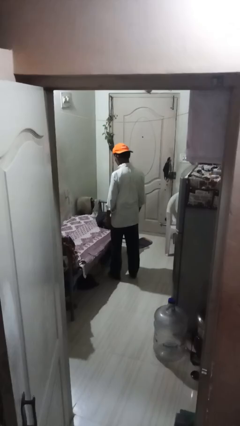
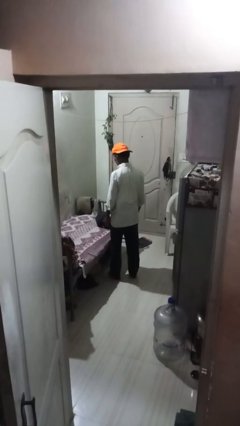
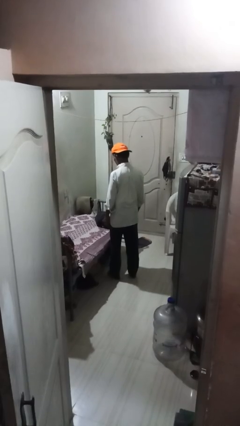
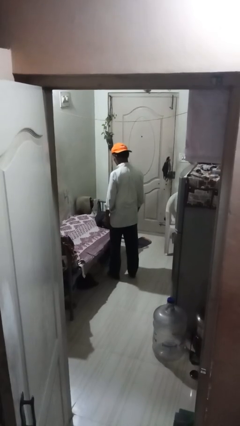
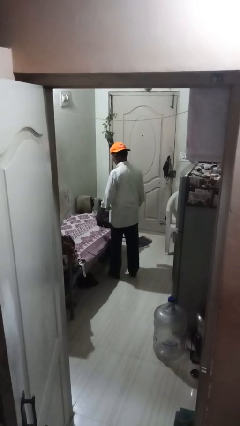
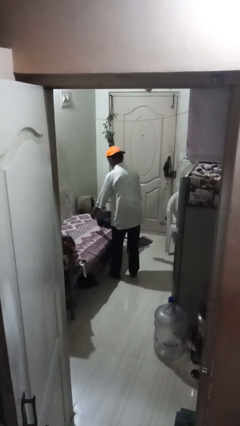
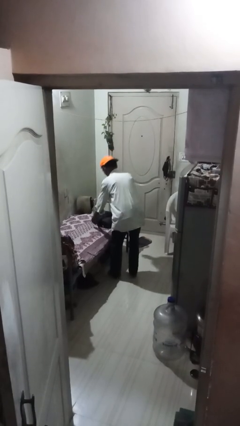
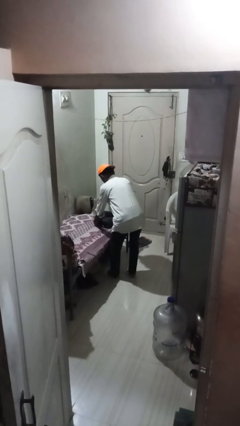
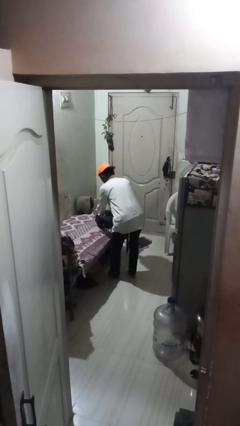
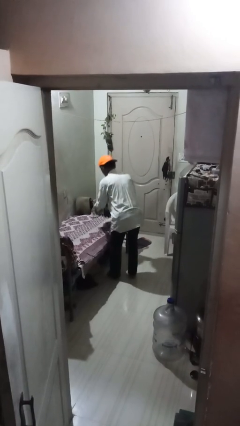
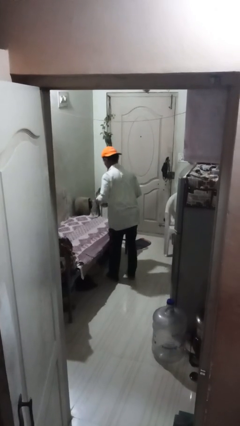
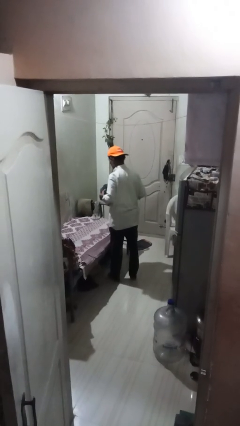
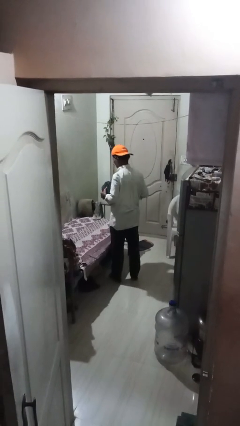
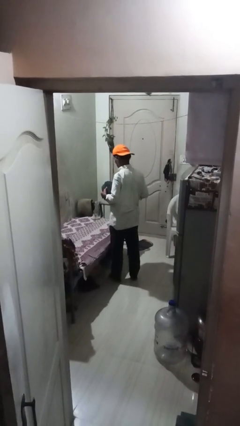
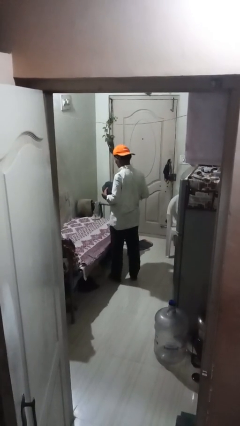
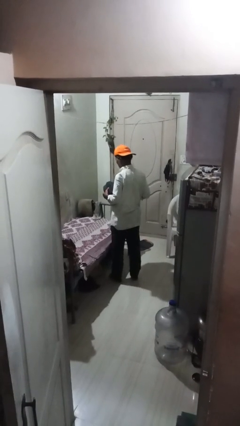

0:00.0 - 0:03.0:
person picks up object from bed

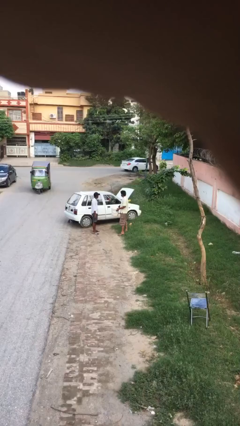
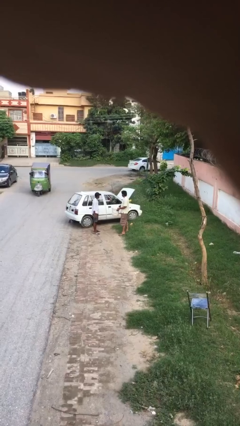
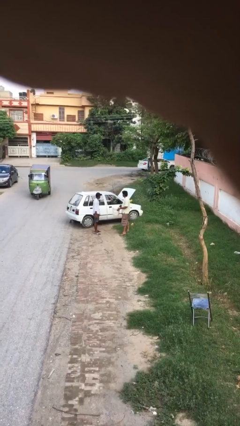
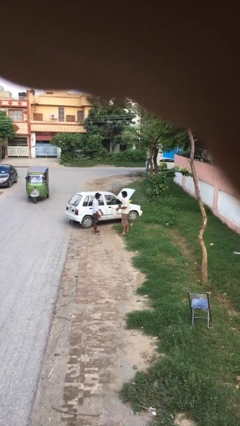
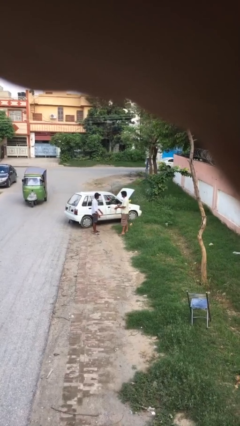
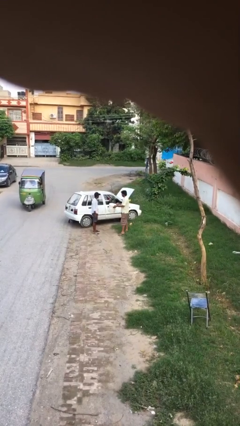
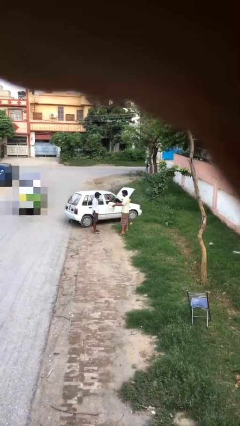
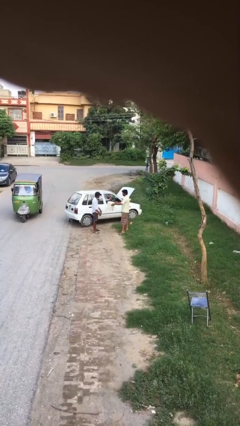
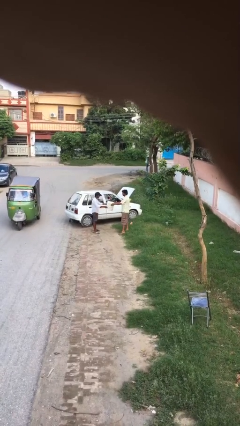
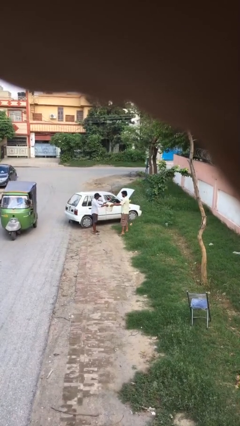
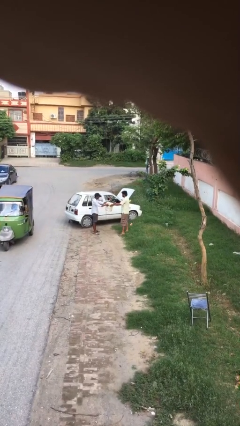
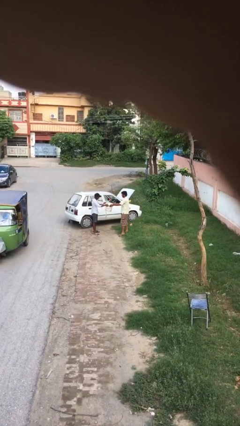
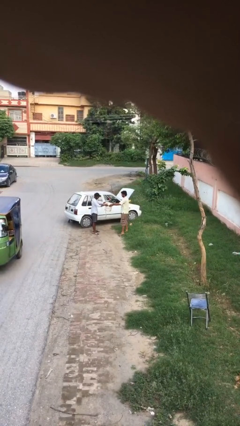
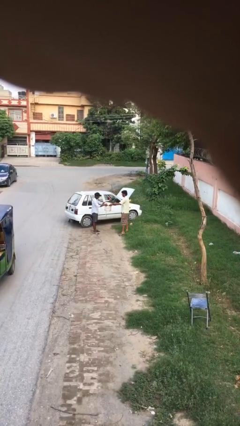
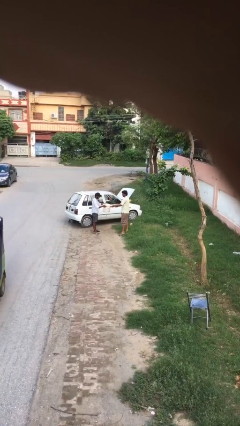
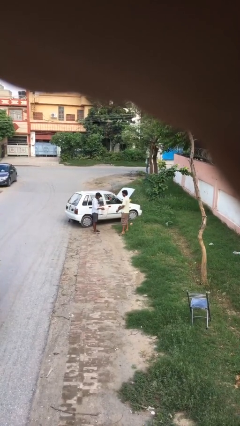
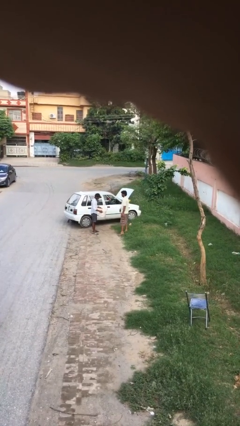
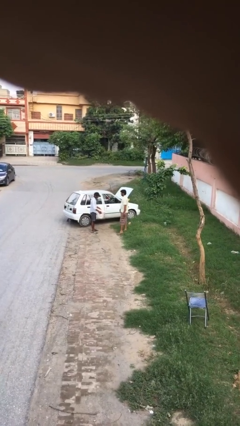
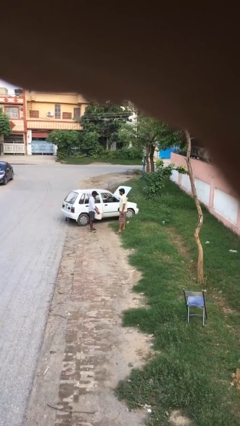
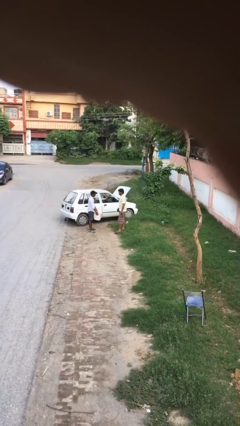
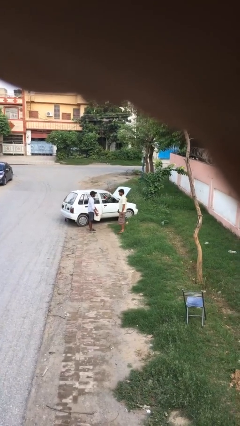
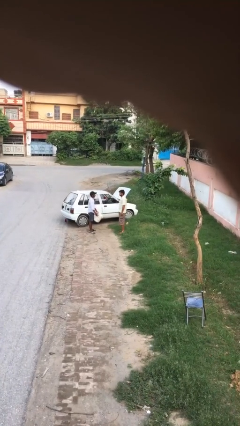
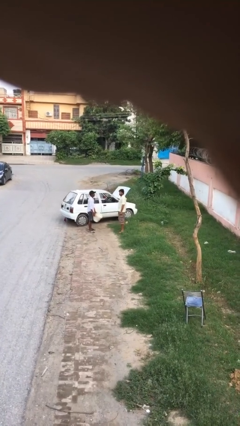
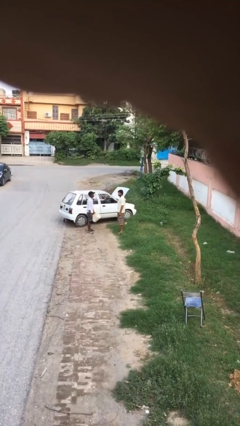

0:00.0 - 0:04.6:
person transfers object to person

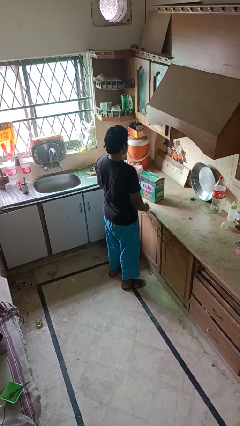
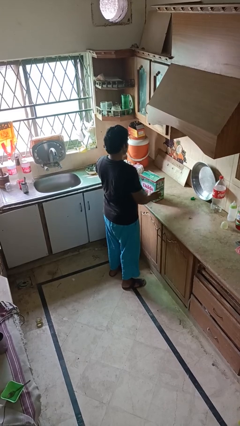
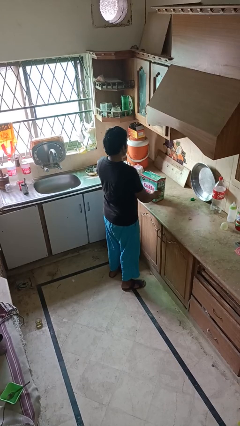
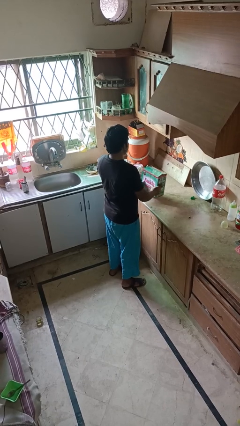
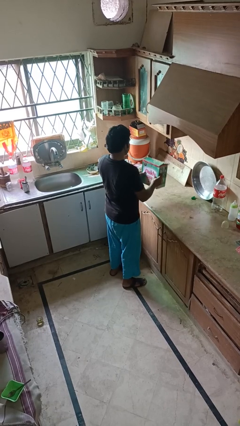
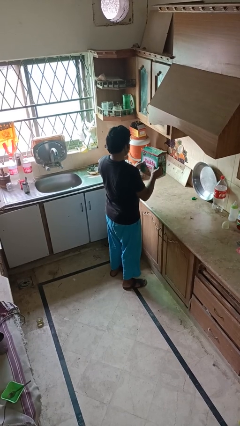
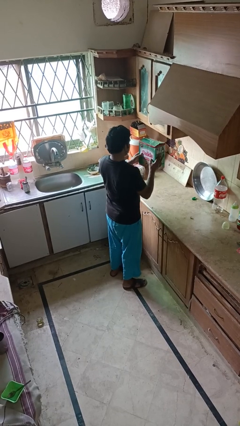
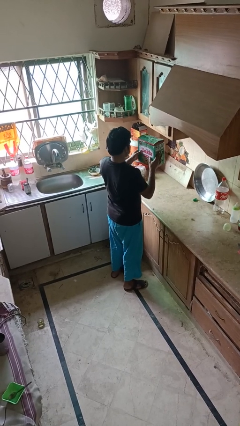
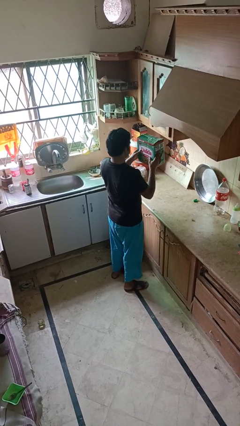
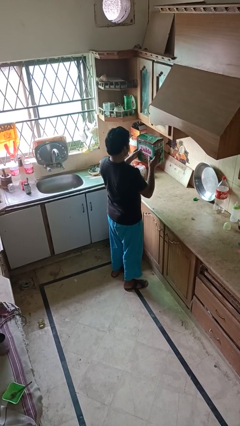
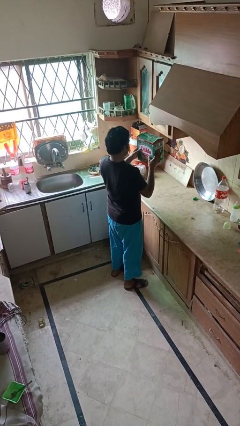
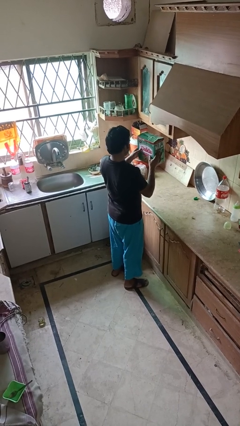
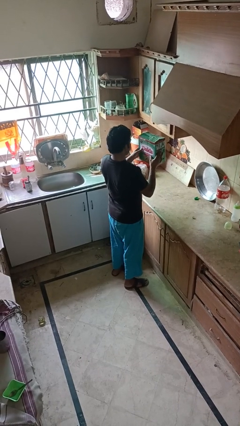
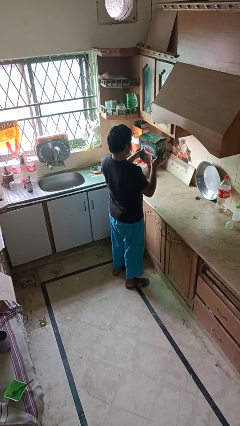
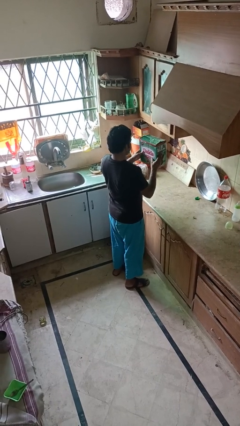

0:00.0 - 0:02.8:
person picks up object from countertop

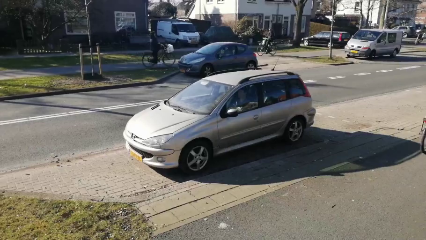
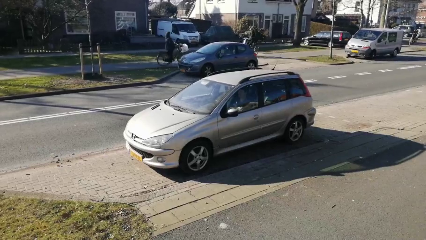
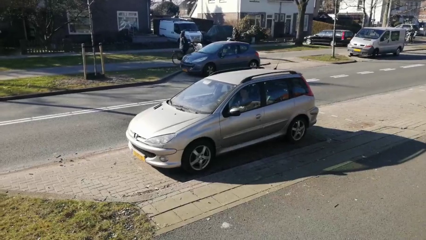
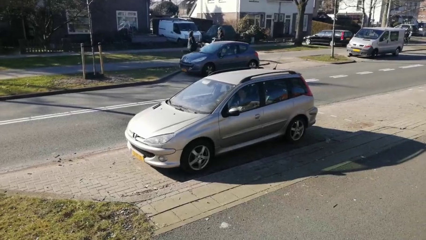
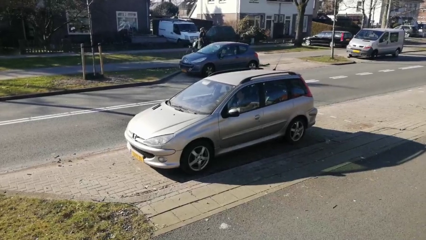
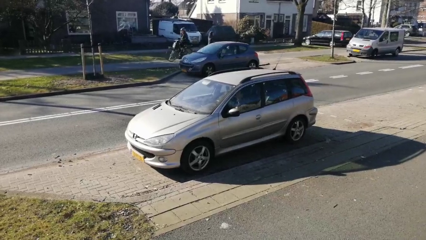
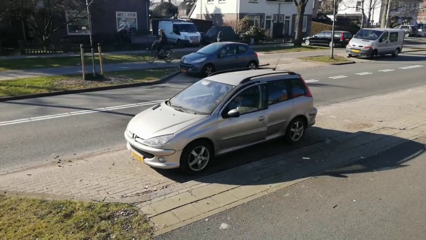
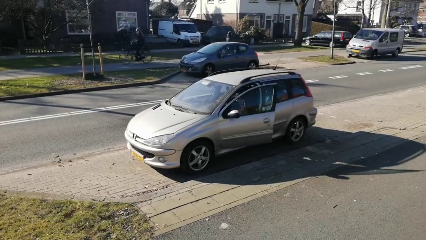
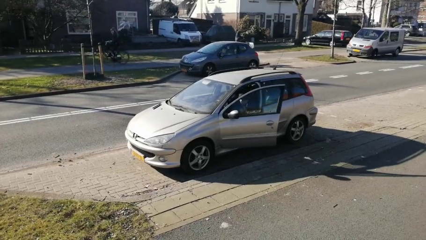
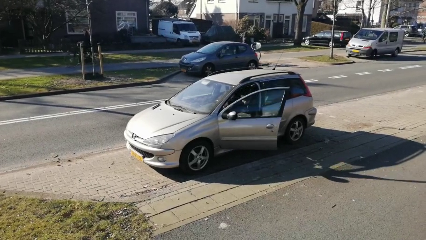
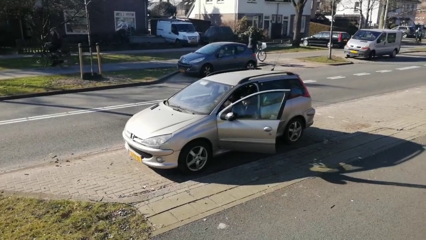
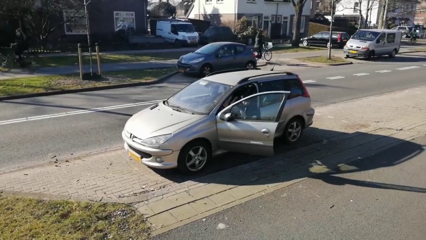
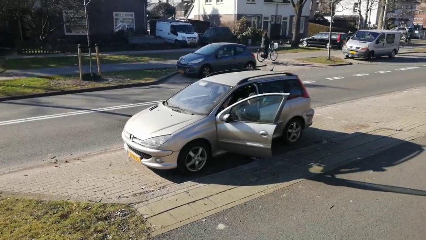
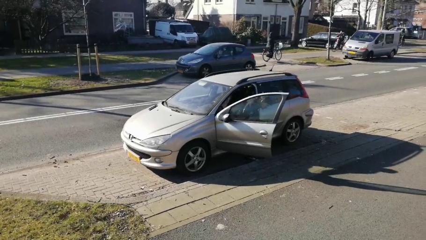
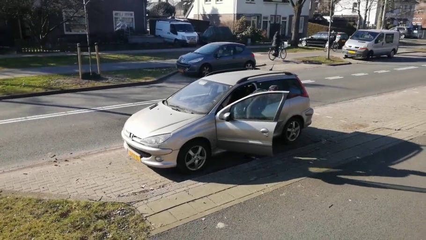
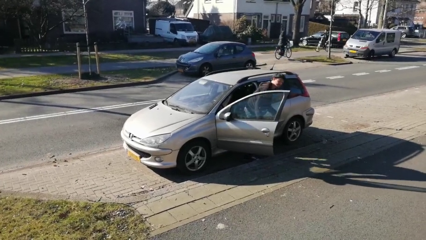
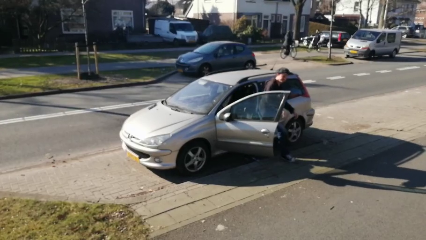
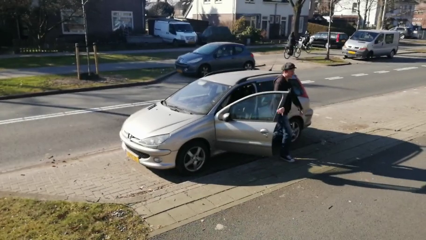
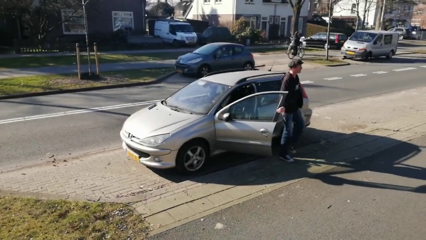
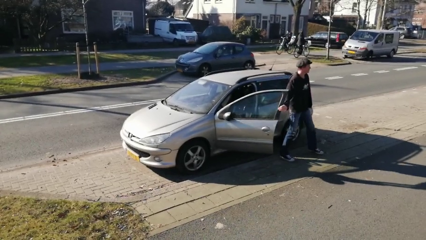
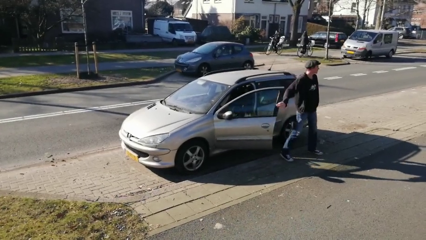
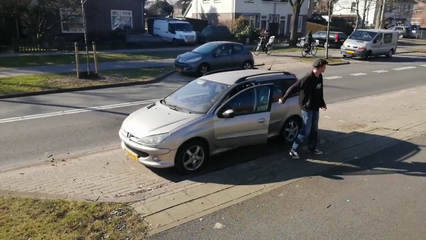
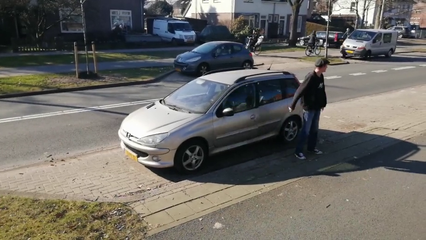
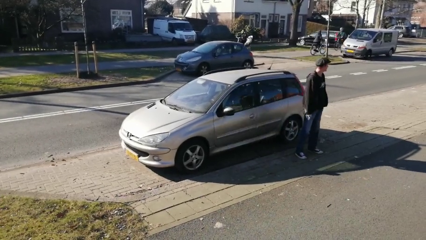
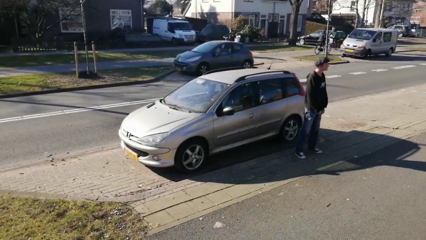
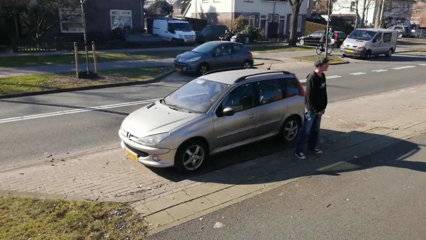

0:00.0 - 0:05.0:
car drops off person

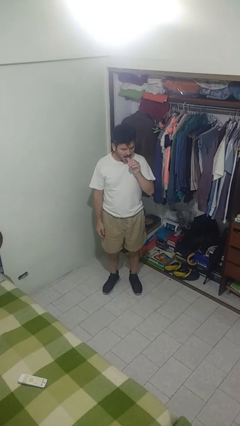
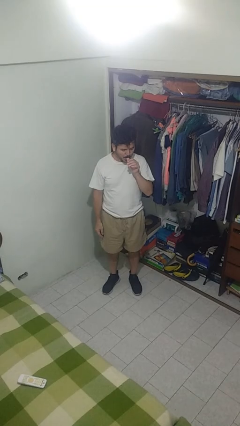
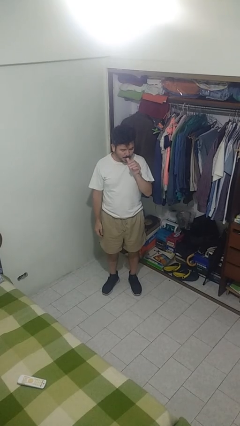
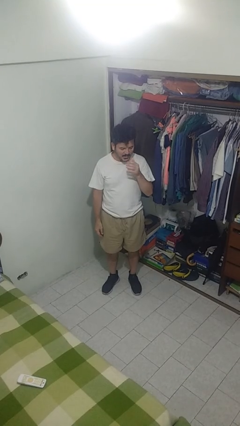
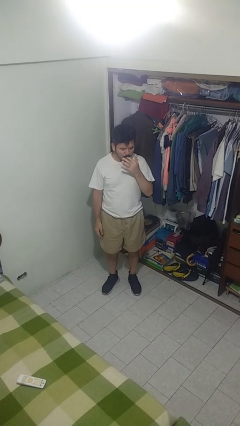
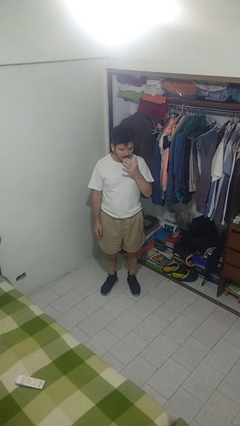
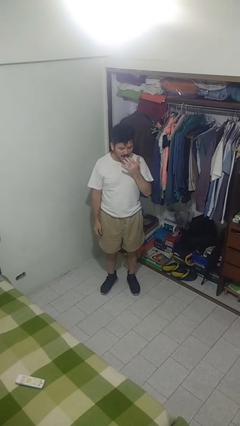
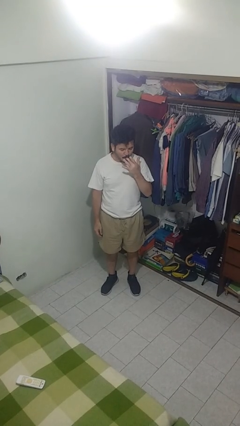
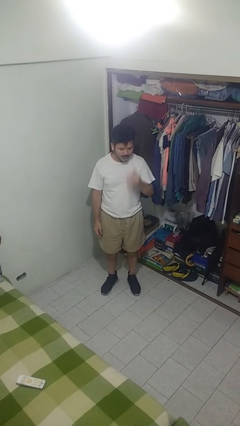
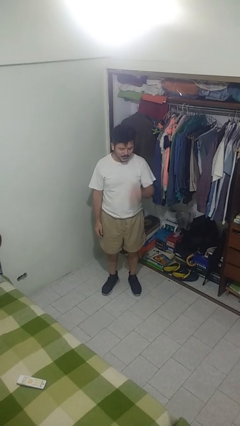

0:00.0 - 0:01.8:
person licks fingers

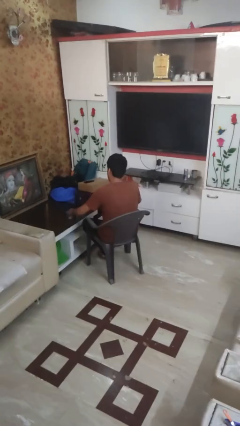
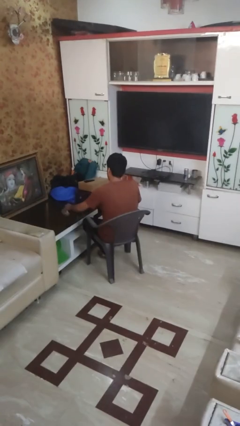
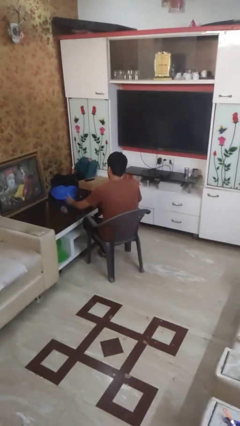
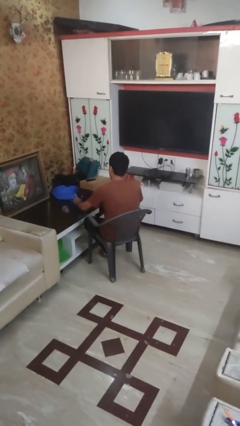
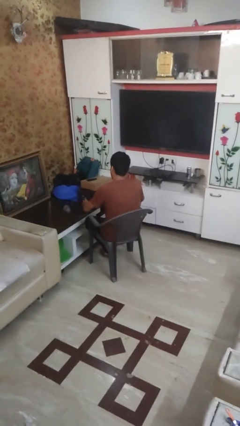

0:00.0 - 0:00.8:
person knocks over glass
